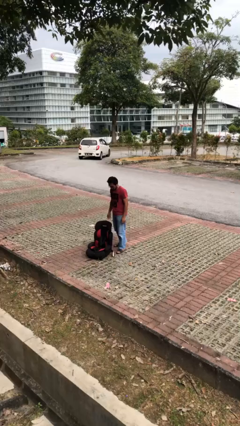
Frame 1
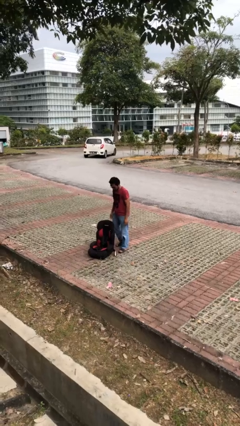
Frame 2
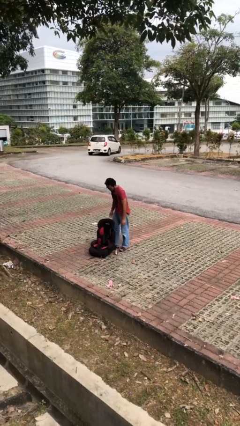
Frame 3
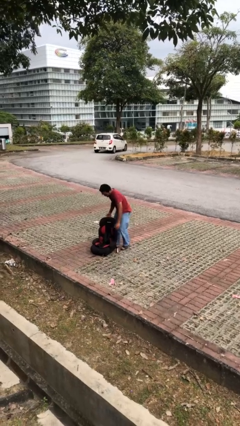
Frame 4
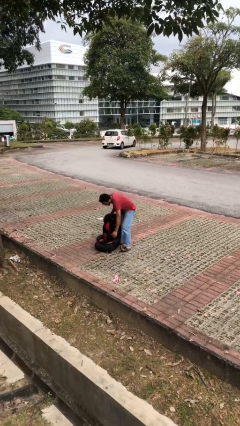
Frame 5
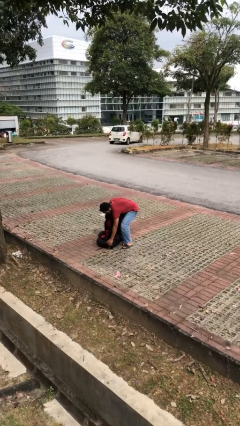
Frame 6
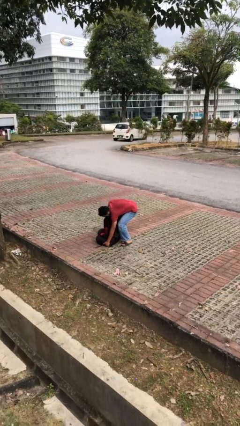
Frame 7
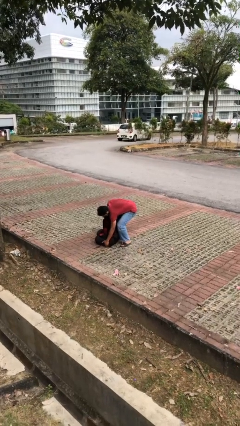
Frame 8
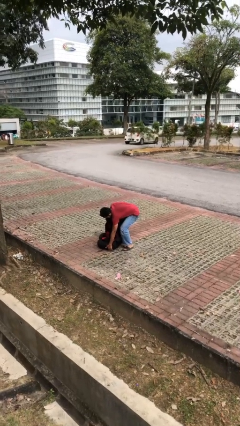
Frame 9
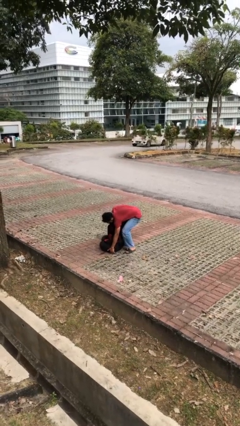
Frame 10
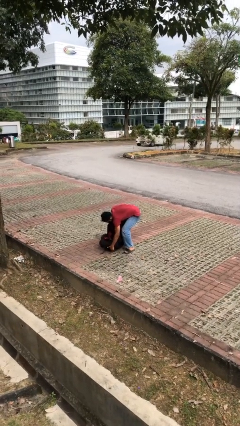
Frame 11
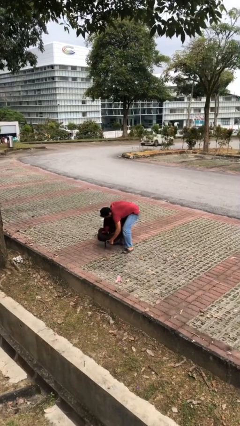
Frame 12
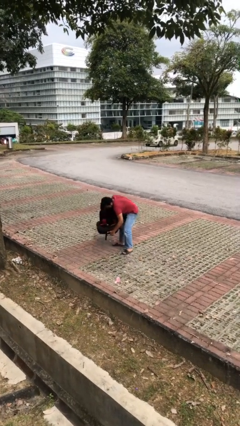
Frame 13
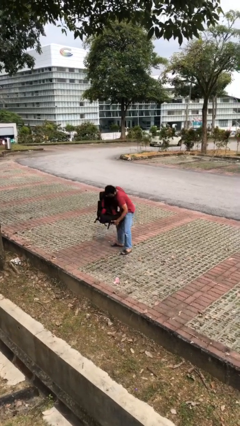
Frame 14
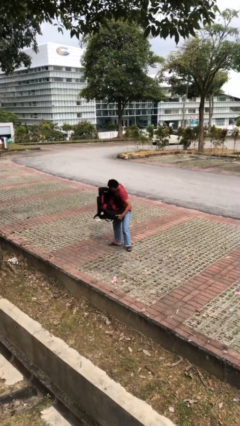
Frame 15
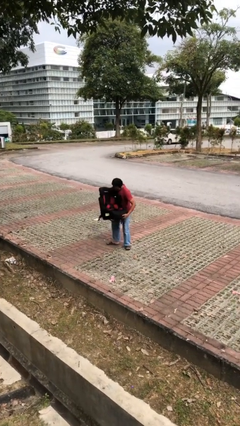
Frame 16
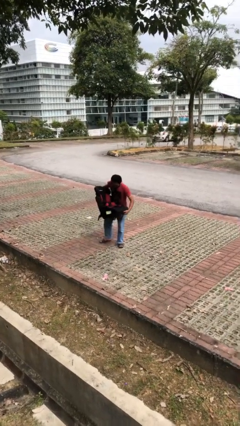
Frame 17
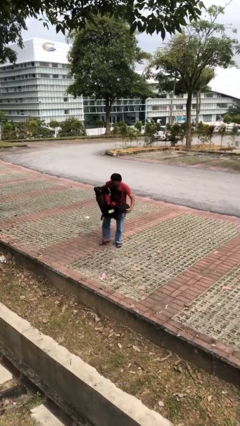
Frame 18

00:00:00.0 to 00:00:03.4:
person picks up object from floor

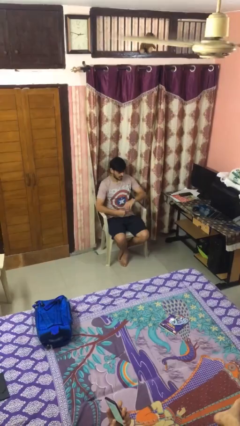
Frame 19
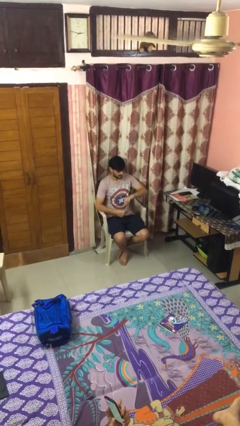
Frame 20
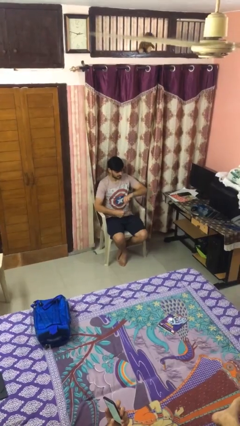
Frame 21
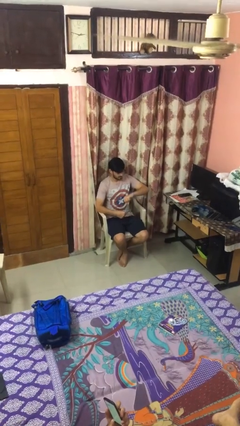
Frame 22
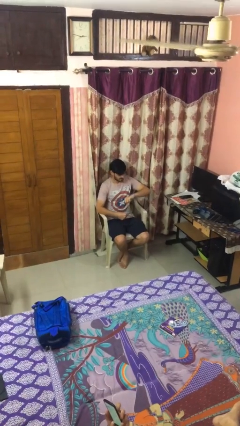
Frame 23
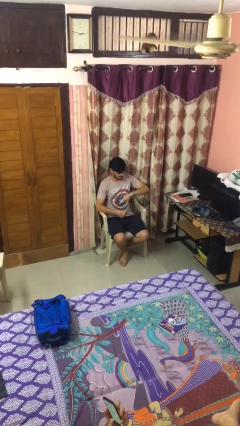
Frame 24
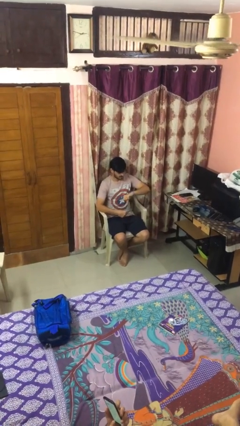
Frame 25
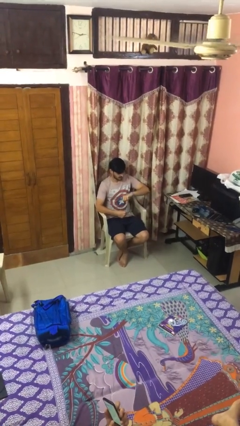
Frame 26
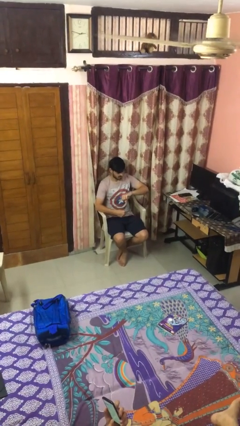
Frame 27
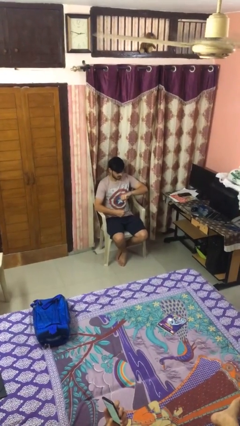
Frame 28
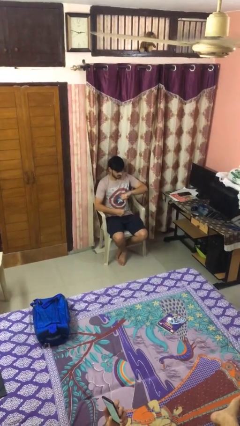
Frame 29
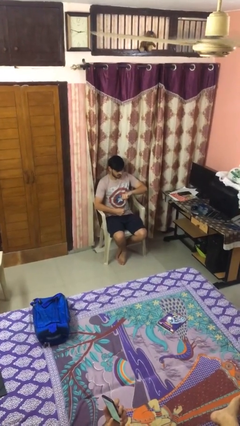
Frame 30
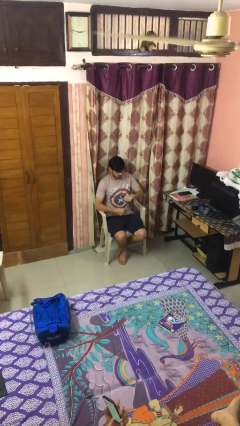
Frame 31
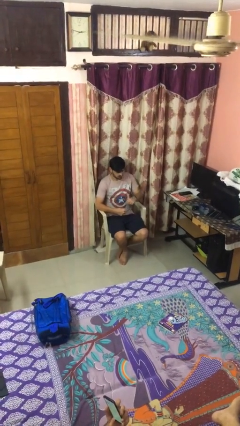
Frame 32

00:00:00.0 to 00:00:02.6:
person looks at wristwatch

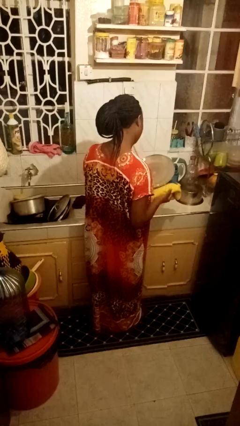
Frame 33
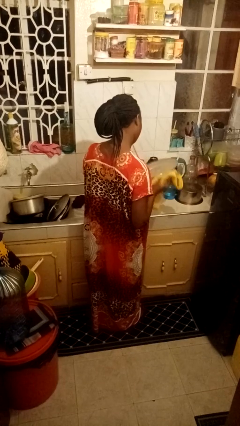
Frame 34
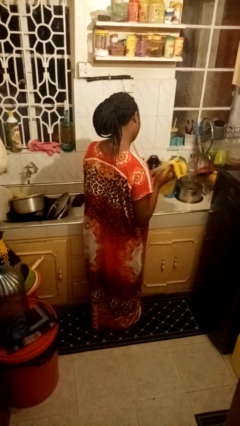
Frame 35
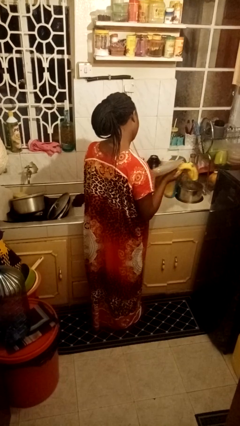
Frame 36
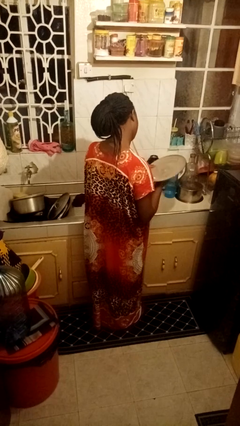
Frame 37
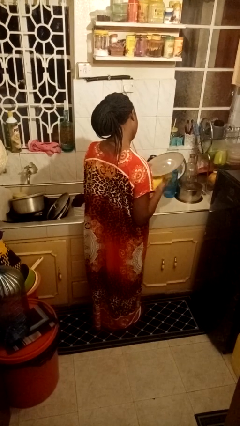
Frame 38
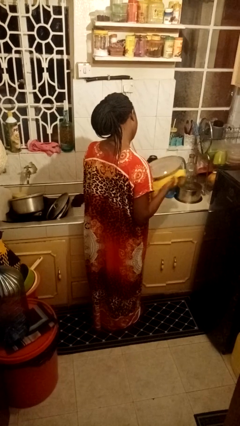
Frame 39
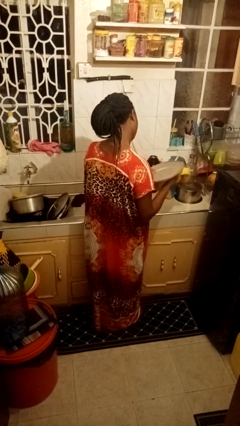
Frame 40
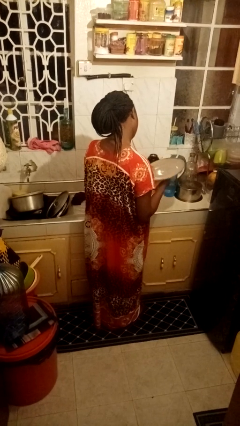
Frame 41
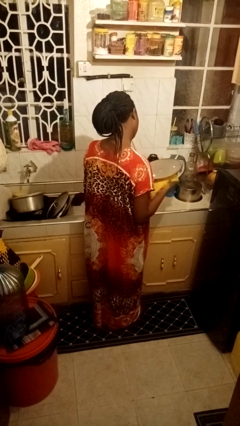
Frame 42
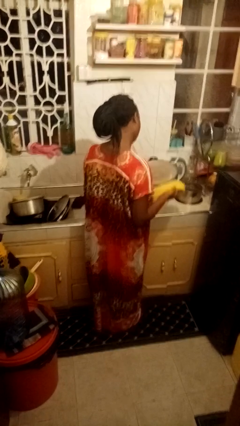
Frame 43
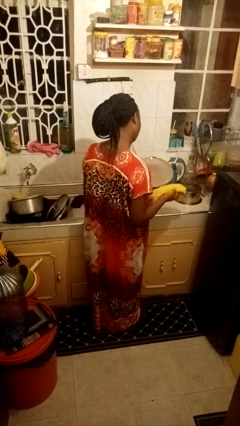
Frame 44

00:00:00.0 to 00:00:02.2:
person dries dish

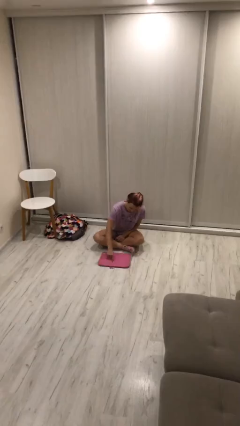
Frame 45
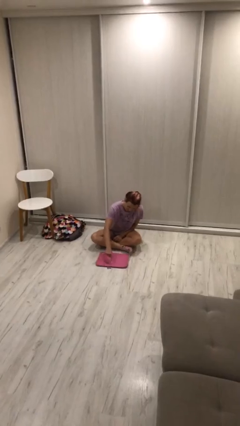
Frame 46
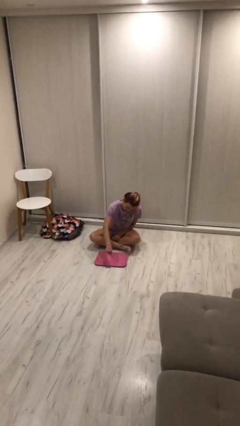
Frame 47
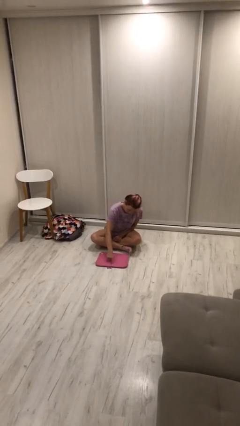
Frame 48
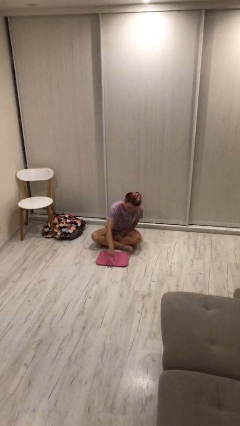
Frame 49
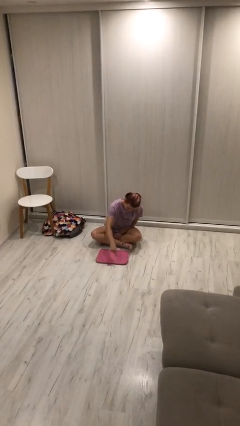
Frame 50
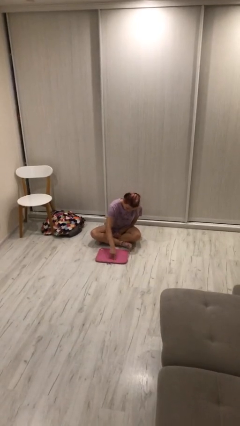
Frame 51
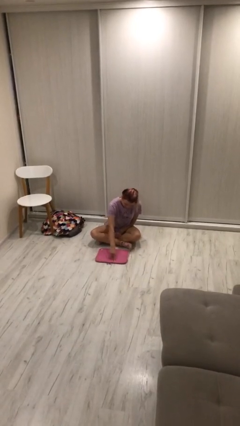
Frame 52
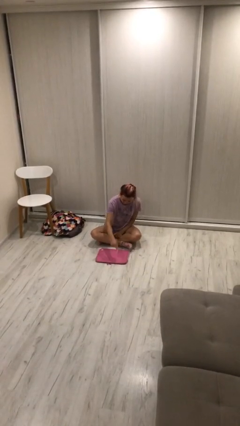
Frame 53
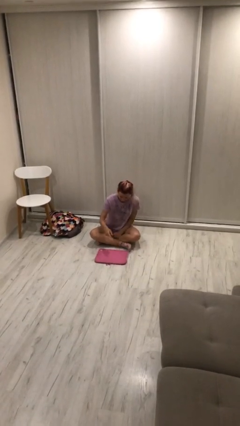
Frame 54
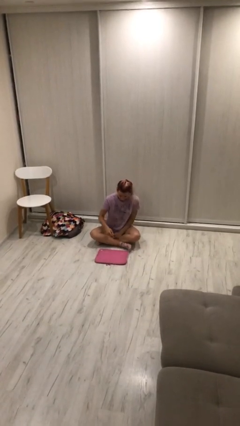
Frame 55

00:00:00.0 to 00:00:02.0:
person taps object with finger

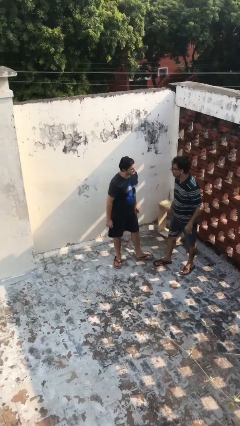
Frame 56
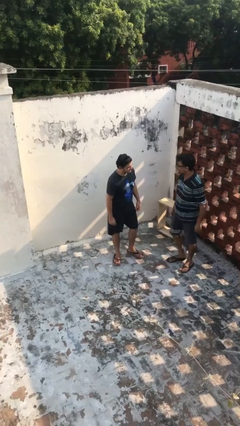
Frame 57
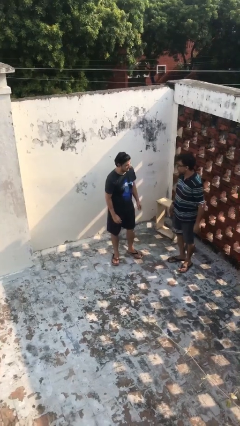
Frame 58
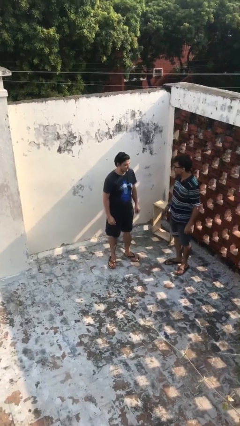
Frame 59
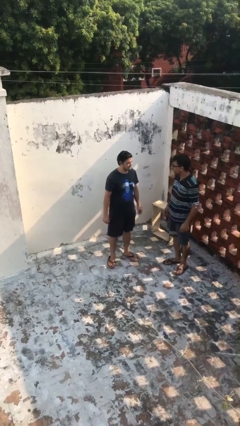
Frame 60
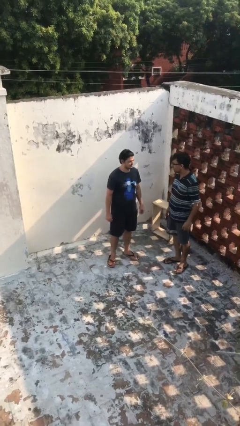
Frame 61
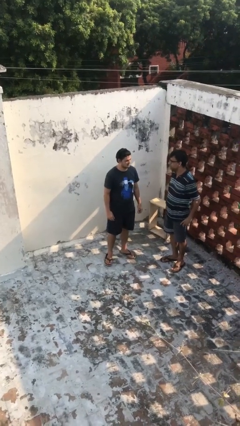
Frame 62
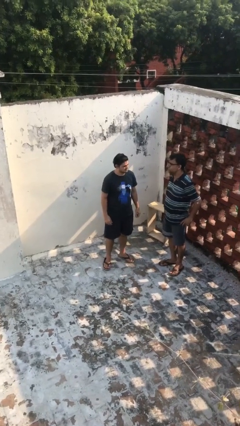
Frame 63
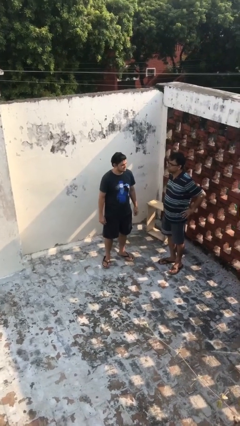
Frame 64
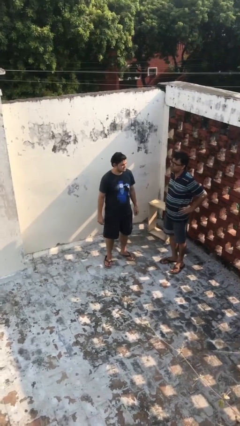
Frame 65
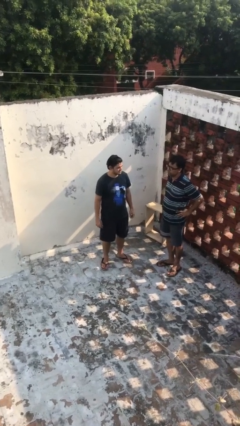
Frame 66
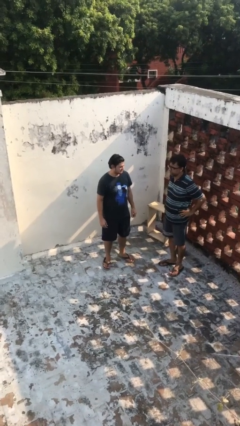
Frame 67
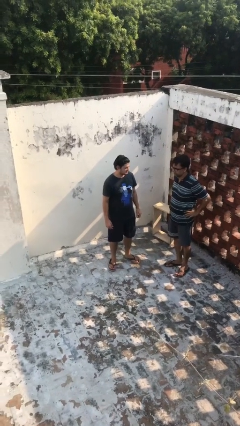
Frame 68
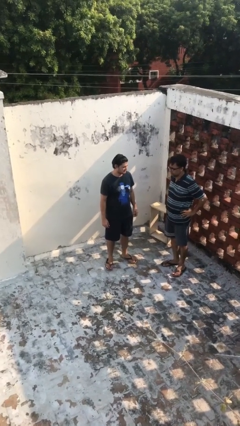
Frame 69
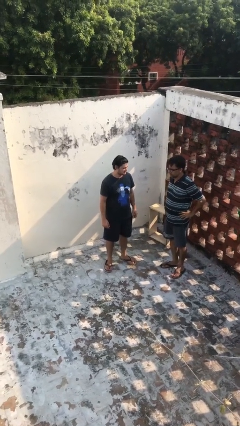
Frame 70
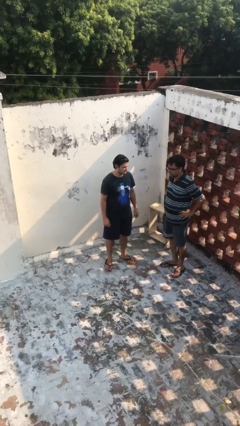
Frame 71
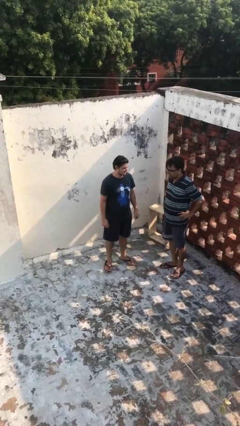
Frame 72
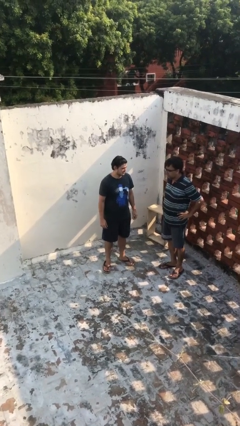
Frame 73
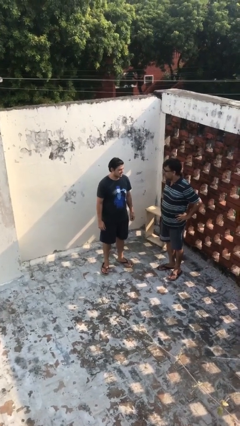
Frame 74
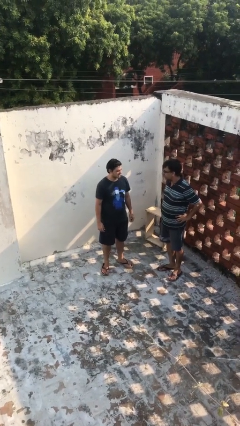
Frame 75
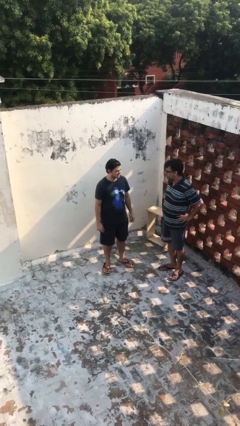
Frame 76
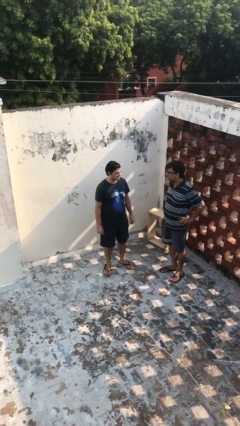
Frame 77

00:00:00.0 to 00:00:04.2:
person talks to person

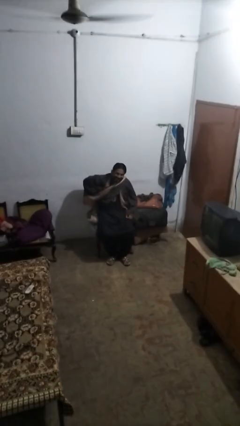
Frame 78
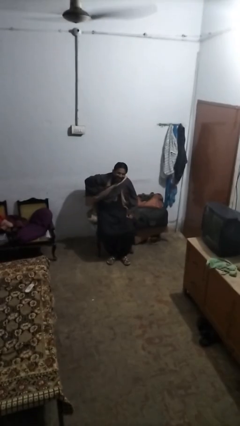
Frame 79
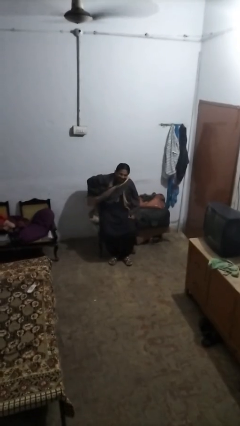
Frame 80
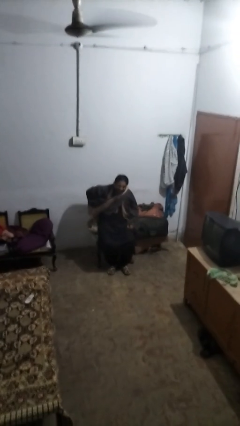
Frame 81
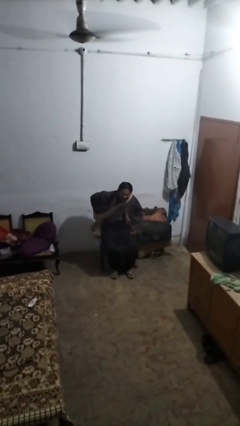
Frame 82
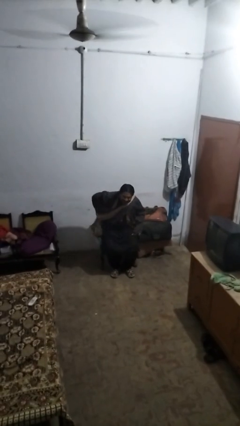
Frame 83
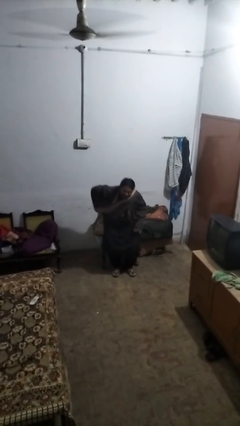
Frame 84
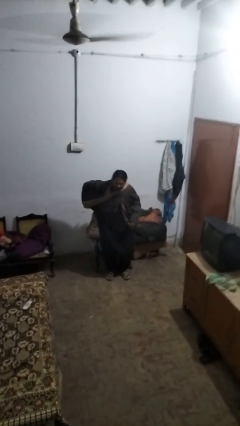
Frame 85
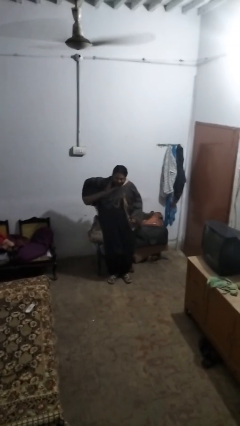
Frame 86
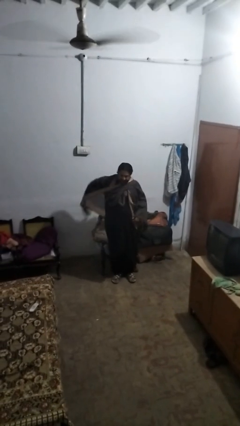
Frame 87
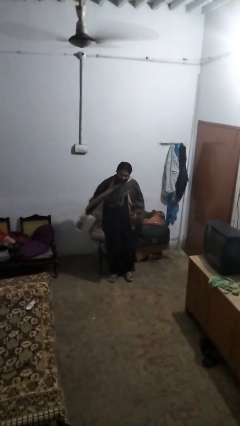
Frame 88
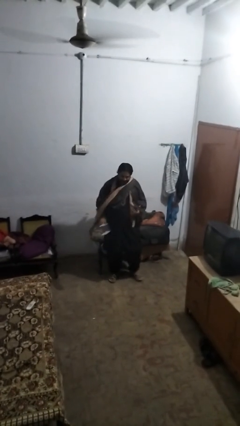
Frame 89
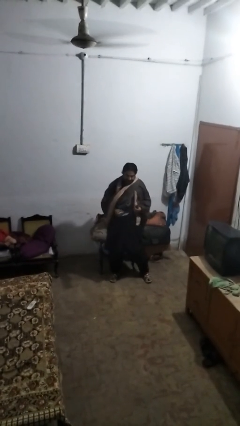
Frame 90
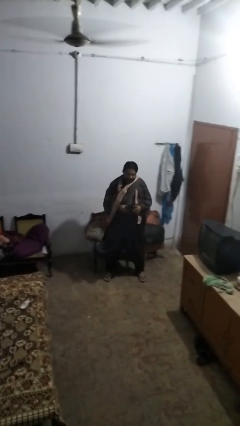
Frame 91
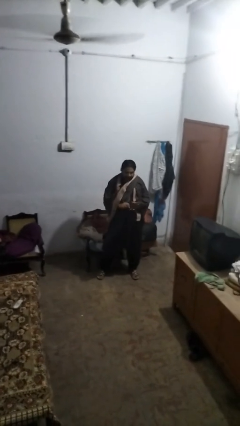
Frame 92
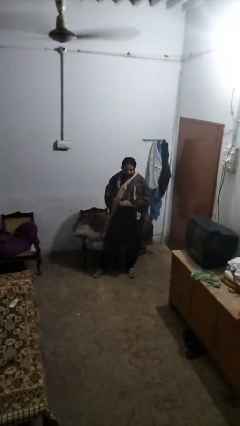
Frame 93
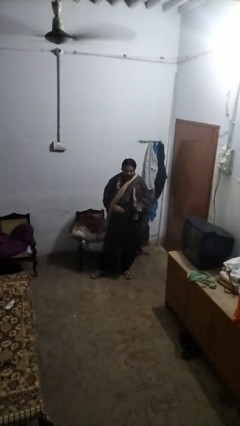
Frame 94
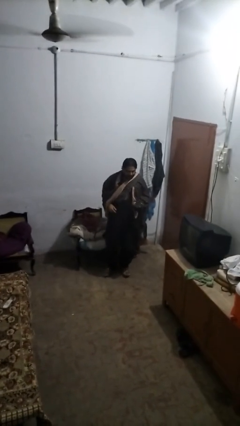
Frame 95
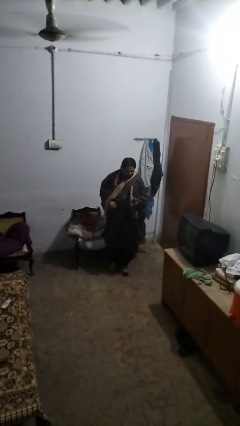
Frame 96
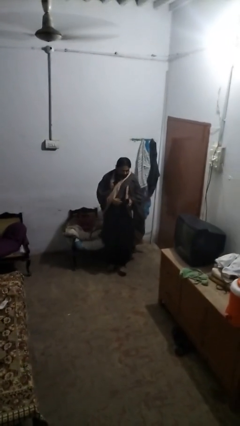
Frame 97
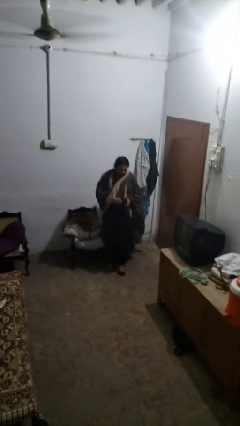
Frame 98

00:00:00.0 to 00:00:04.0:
person takes phone from pocket
